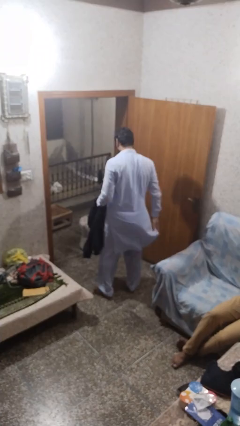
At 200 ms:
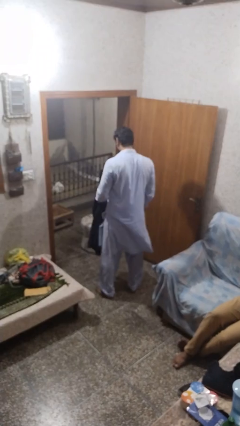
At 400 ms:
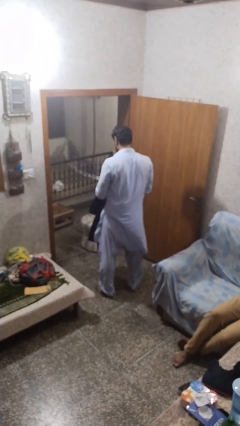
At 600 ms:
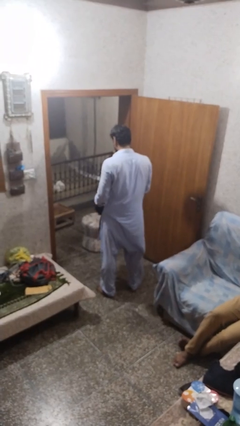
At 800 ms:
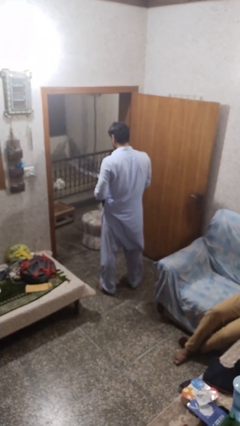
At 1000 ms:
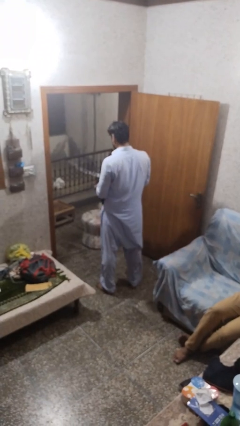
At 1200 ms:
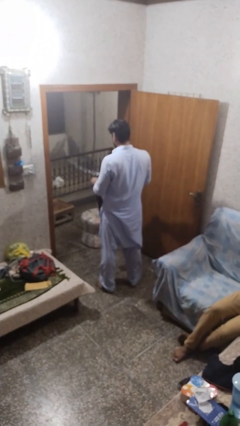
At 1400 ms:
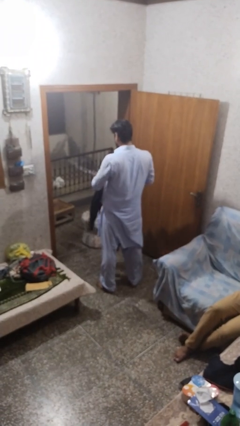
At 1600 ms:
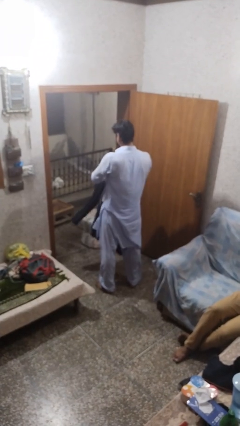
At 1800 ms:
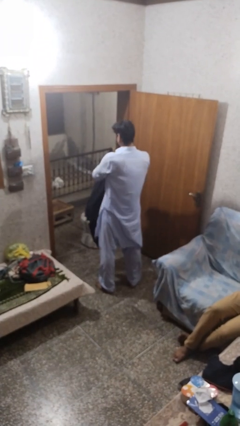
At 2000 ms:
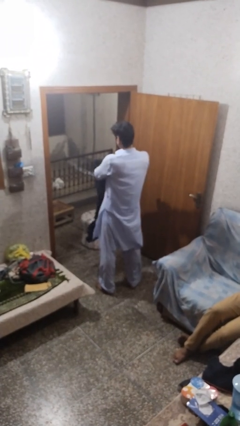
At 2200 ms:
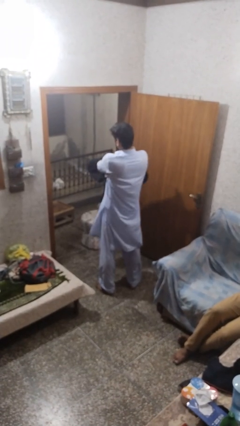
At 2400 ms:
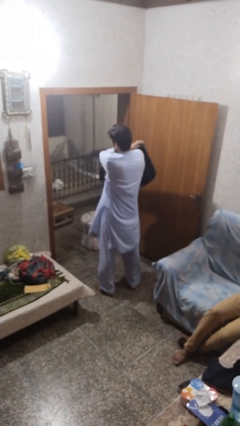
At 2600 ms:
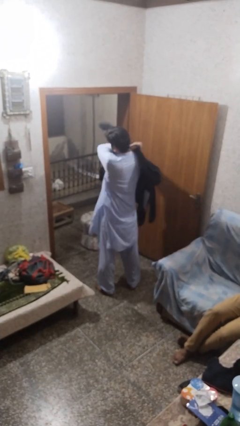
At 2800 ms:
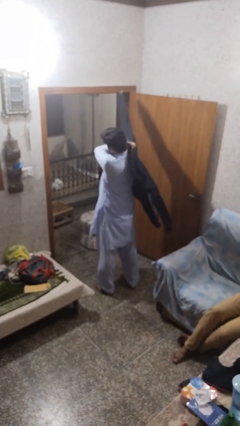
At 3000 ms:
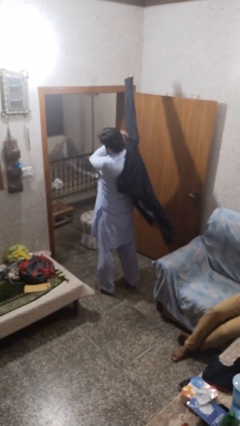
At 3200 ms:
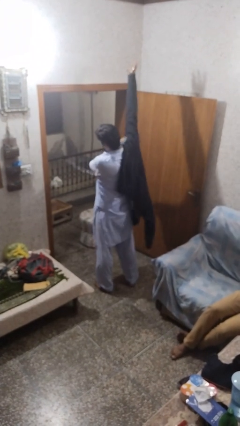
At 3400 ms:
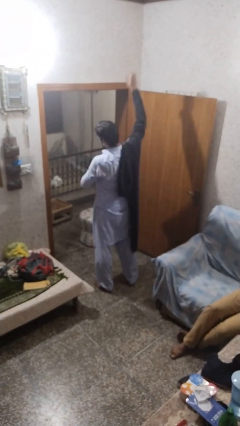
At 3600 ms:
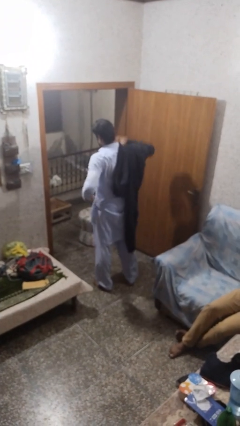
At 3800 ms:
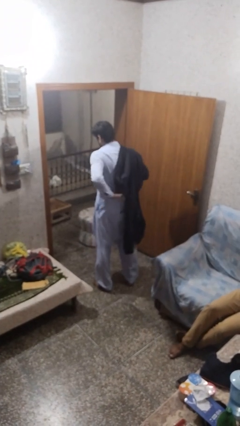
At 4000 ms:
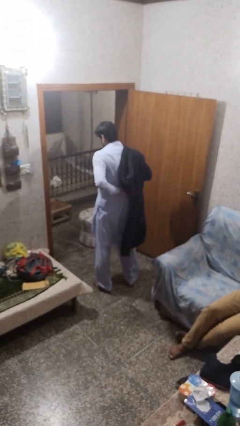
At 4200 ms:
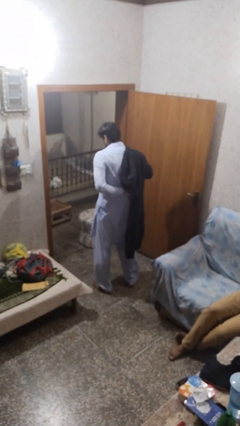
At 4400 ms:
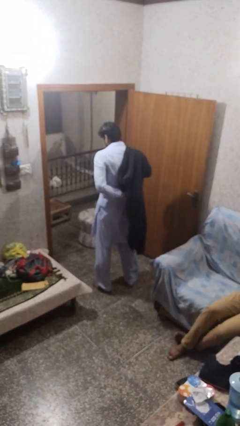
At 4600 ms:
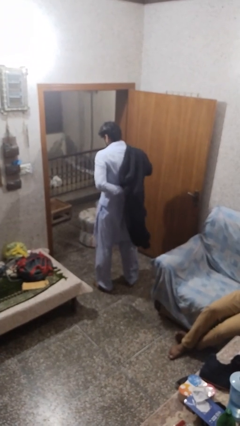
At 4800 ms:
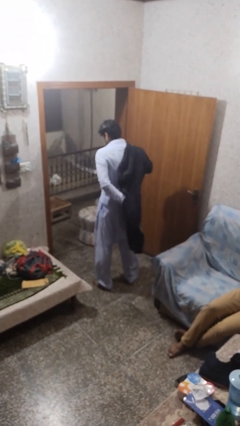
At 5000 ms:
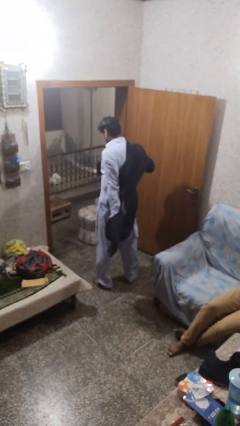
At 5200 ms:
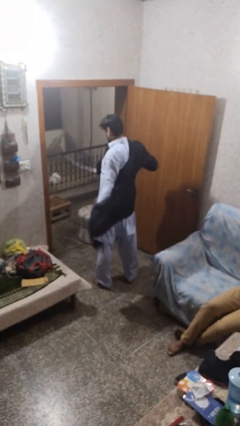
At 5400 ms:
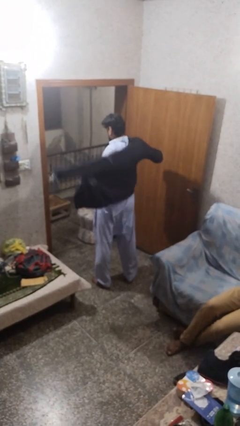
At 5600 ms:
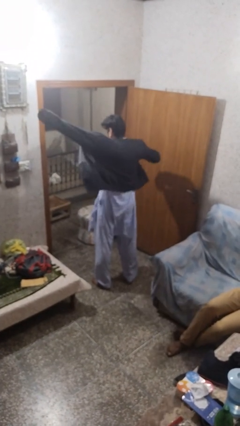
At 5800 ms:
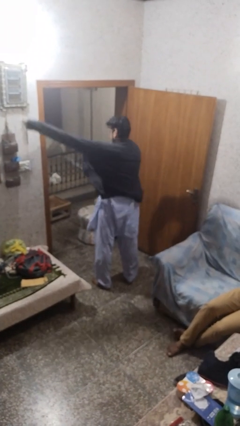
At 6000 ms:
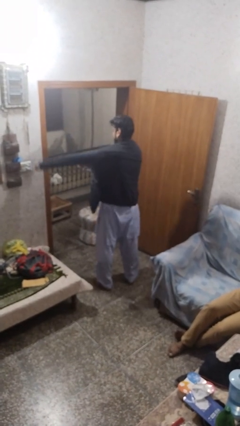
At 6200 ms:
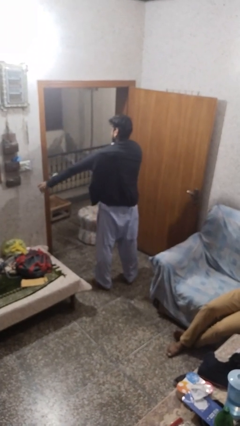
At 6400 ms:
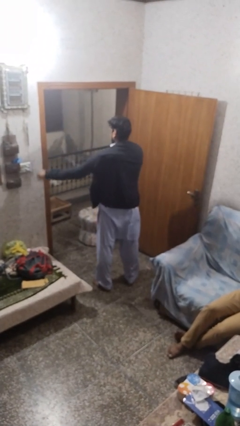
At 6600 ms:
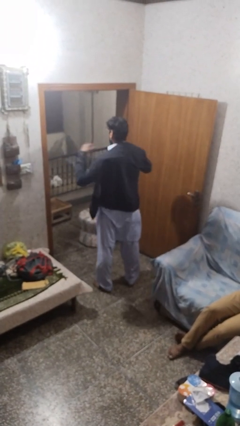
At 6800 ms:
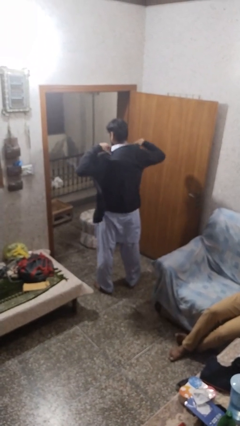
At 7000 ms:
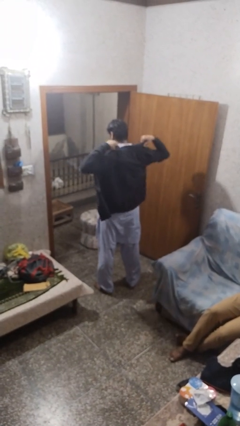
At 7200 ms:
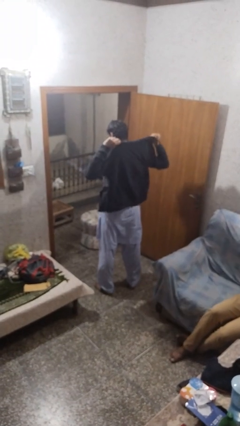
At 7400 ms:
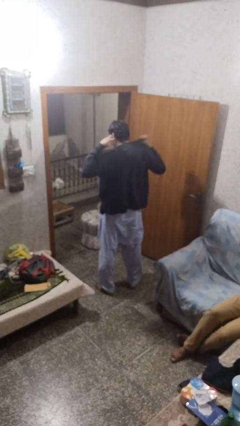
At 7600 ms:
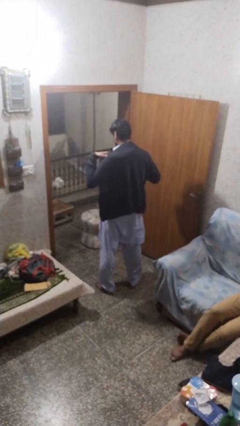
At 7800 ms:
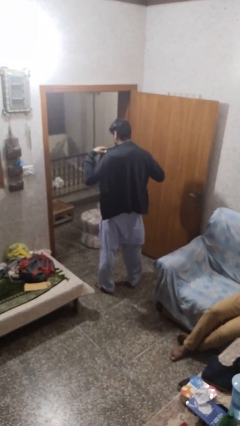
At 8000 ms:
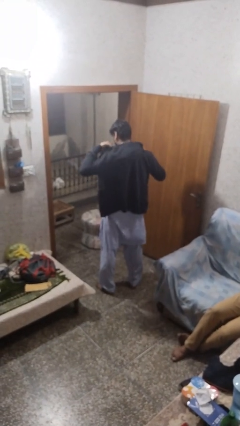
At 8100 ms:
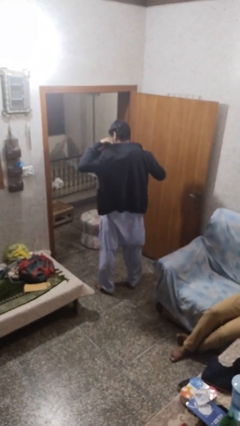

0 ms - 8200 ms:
person puts on jacket

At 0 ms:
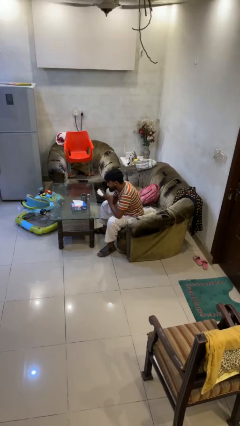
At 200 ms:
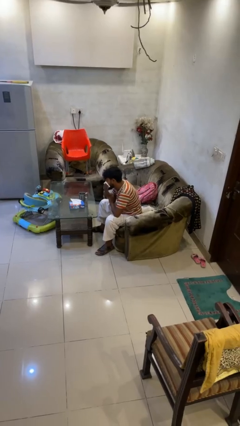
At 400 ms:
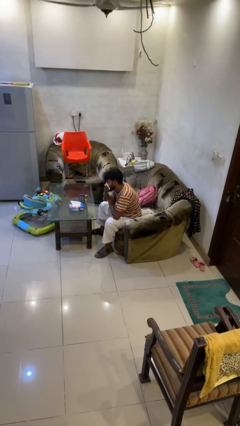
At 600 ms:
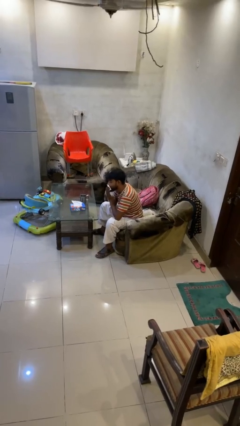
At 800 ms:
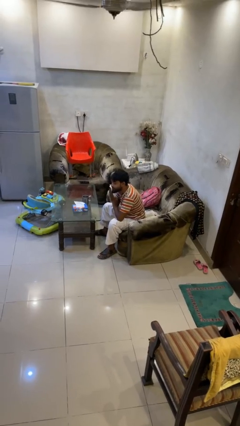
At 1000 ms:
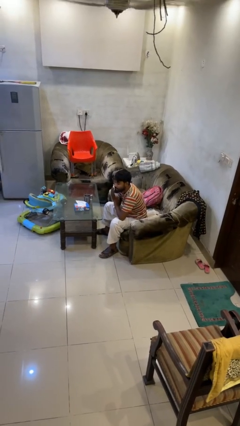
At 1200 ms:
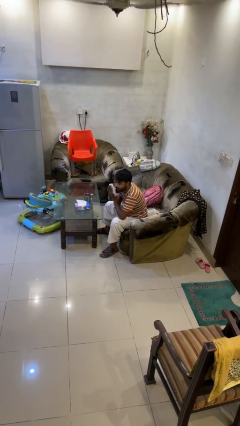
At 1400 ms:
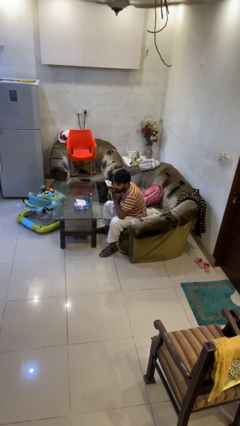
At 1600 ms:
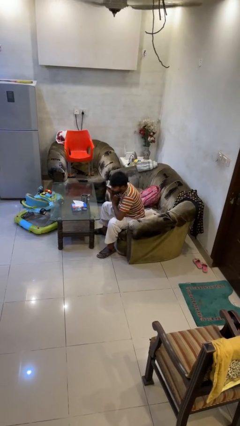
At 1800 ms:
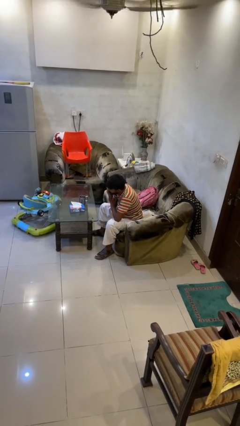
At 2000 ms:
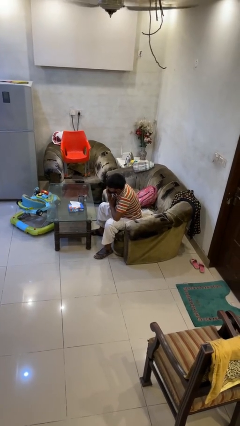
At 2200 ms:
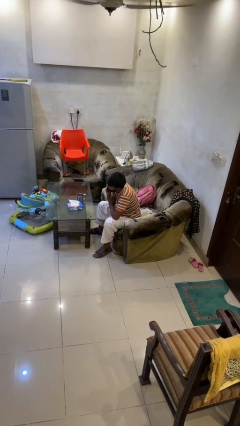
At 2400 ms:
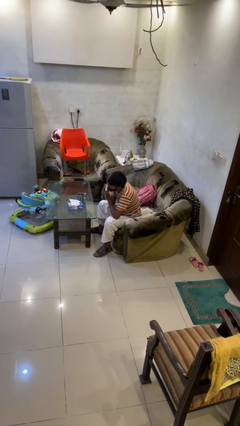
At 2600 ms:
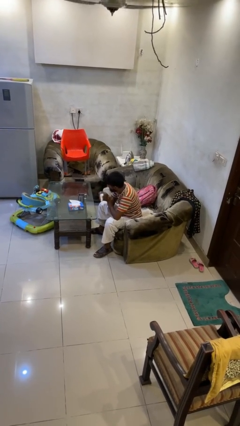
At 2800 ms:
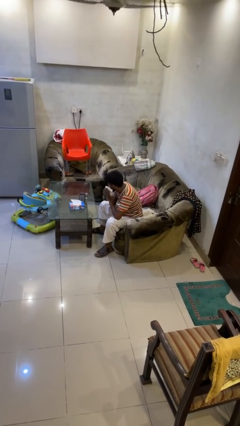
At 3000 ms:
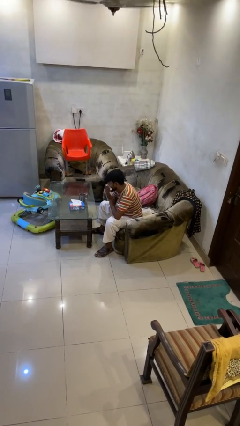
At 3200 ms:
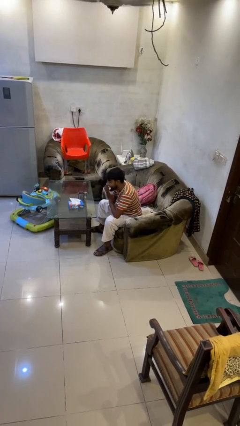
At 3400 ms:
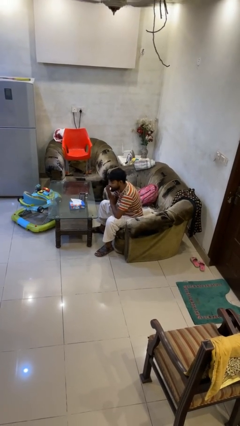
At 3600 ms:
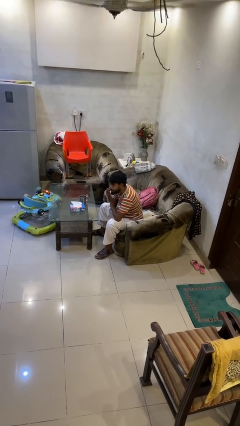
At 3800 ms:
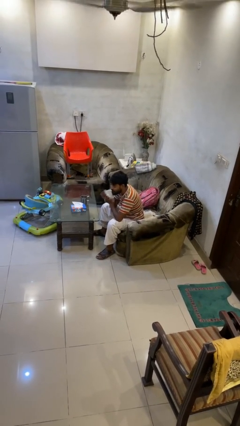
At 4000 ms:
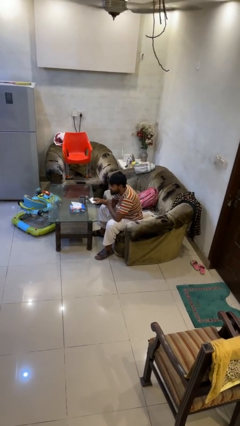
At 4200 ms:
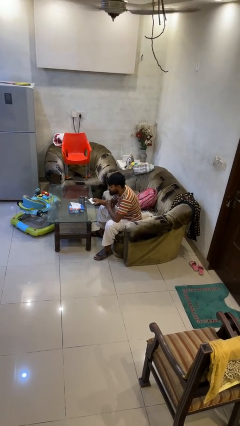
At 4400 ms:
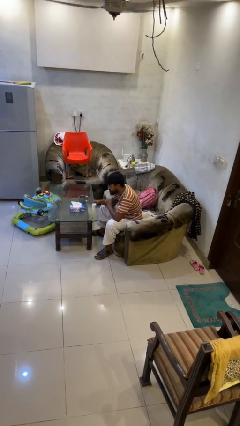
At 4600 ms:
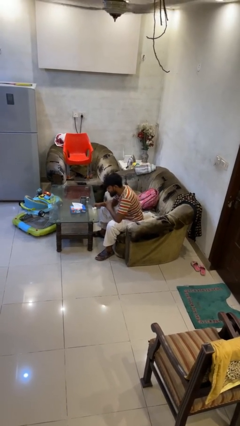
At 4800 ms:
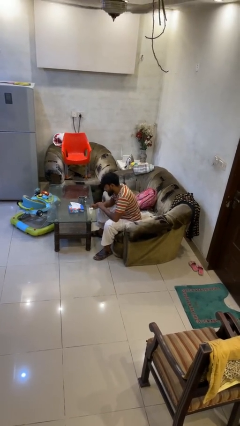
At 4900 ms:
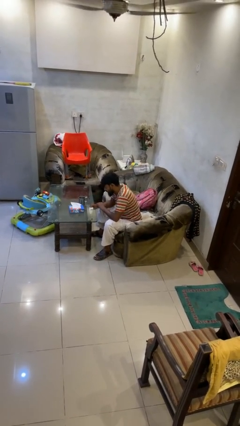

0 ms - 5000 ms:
person wipes mouth with napkin

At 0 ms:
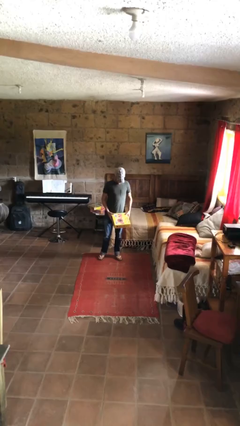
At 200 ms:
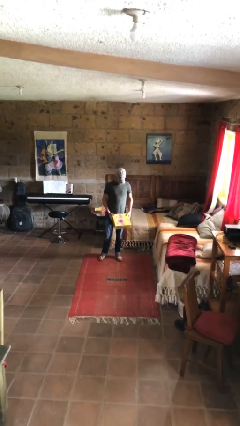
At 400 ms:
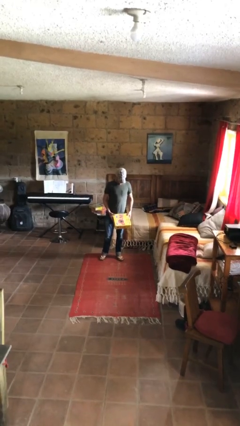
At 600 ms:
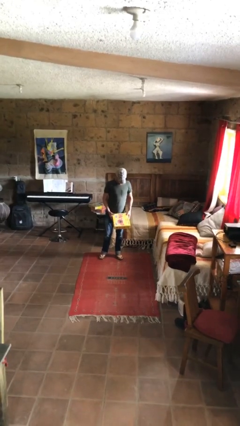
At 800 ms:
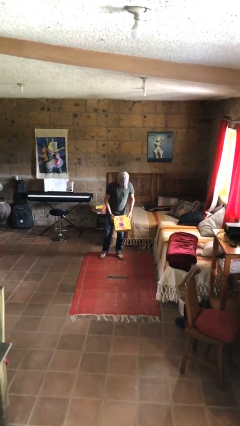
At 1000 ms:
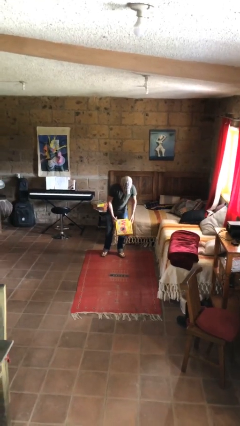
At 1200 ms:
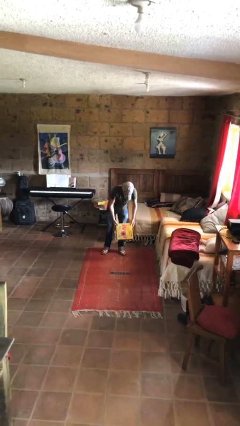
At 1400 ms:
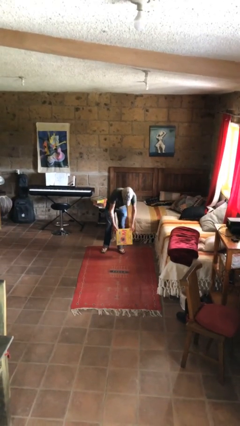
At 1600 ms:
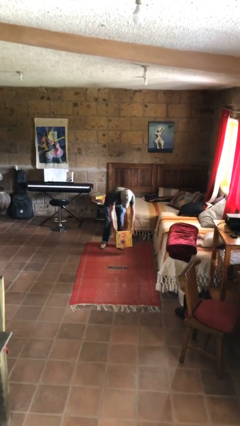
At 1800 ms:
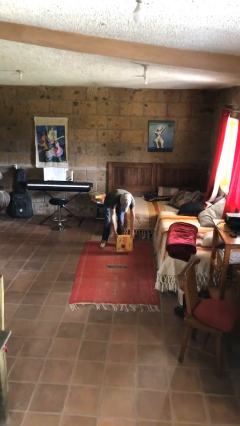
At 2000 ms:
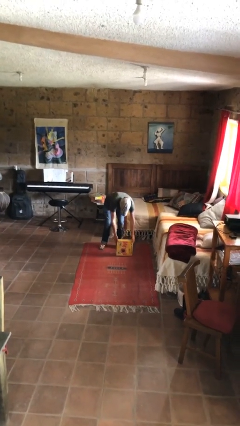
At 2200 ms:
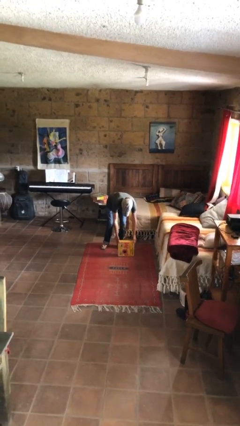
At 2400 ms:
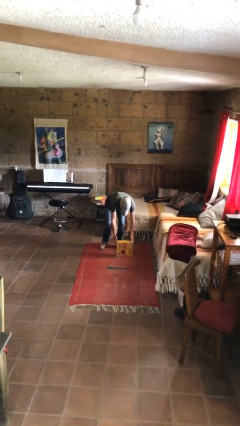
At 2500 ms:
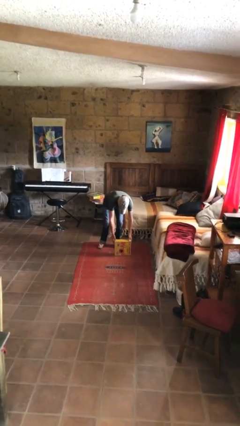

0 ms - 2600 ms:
person puts down object on floor

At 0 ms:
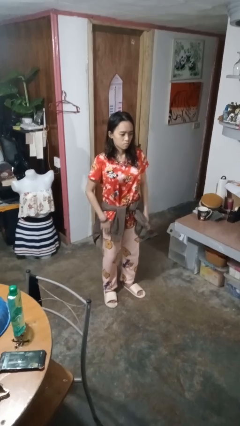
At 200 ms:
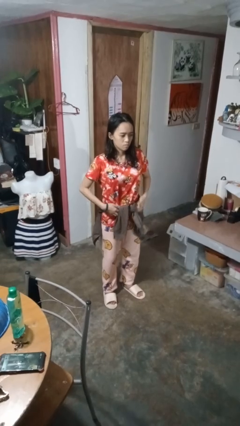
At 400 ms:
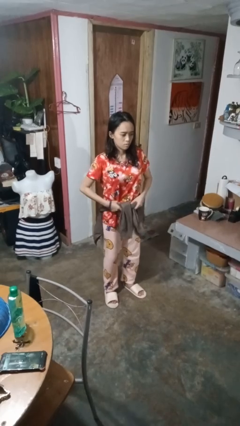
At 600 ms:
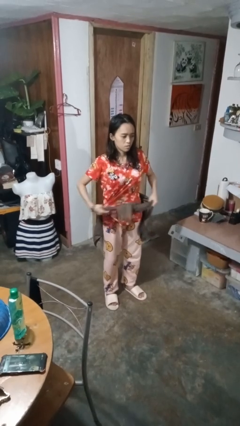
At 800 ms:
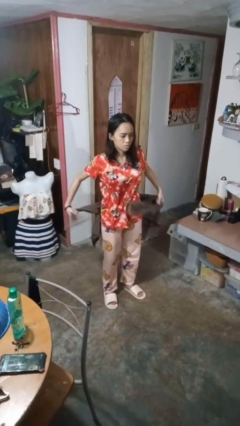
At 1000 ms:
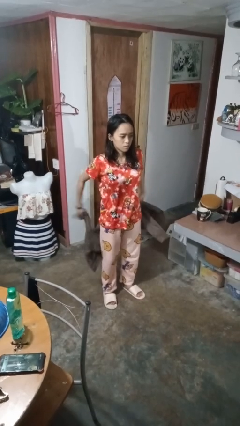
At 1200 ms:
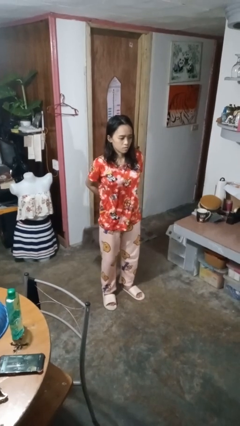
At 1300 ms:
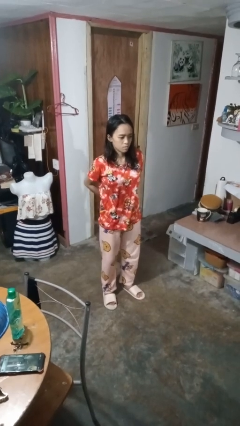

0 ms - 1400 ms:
person unties jacket around waist

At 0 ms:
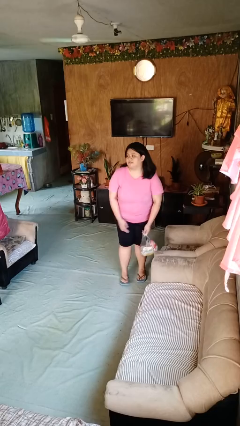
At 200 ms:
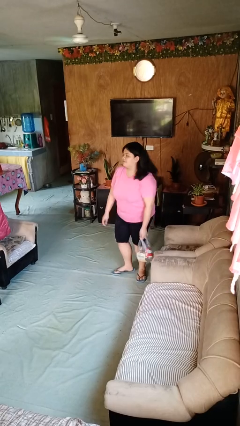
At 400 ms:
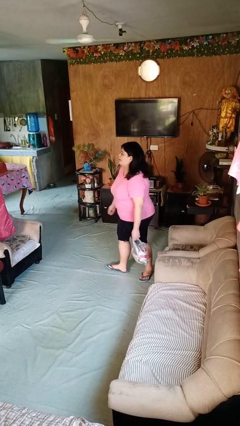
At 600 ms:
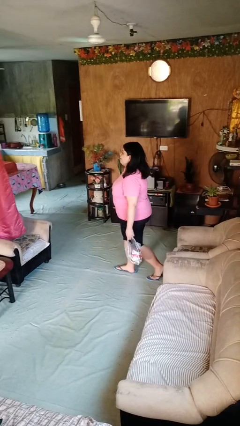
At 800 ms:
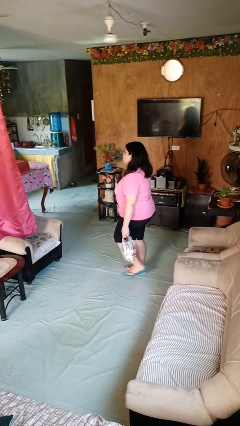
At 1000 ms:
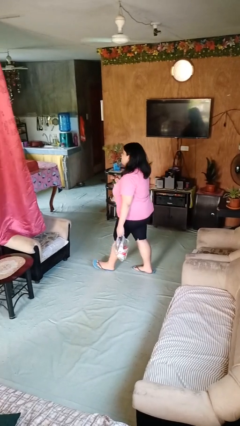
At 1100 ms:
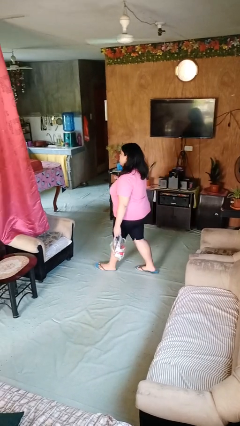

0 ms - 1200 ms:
person carries groceries
